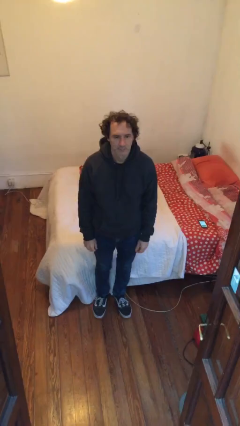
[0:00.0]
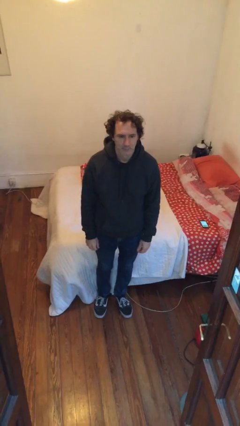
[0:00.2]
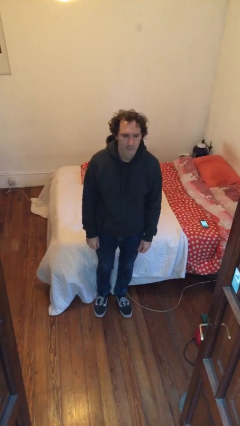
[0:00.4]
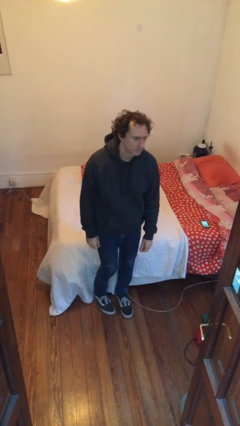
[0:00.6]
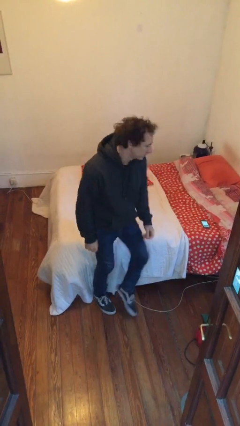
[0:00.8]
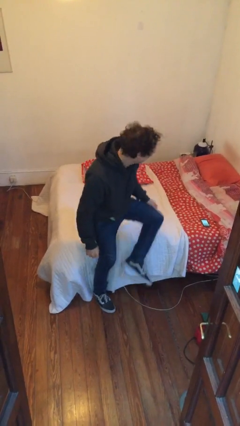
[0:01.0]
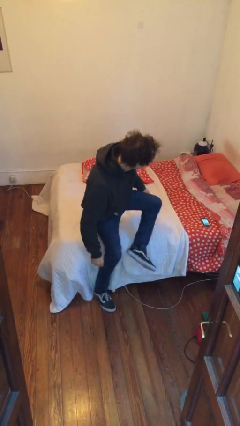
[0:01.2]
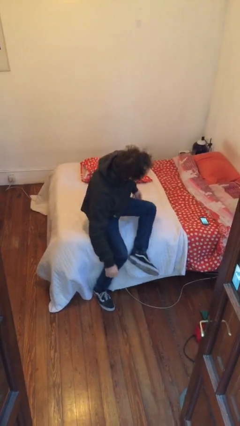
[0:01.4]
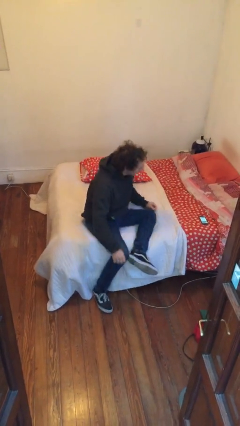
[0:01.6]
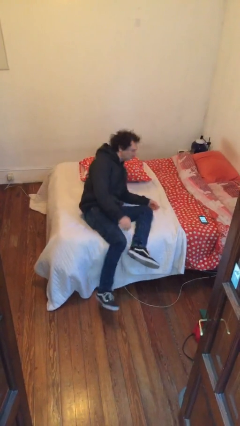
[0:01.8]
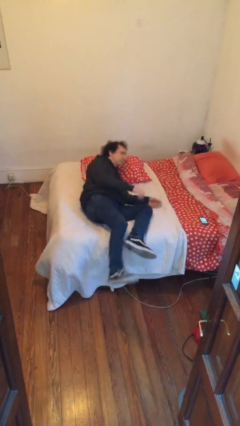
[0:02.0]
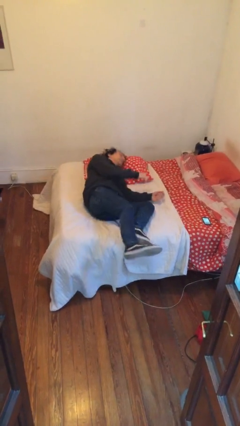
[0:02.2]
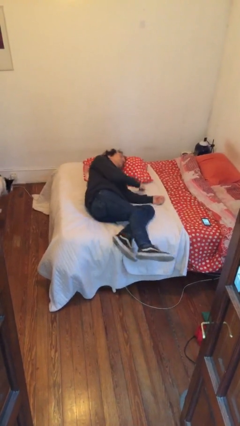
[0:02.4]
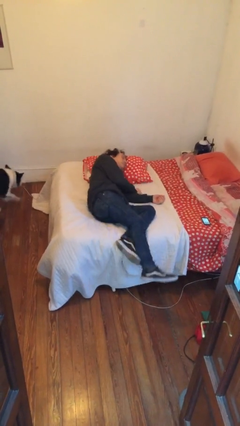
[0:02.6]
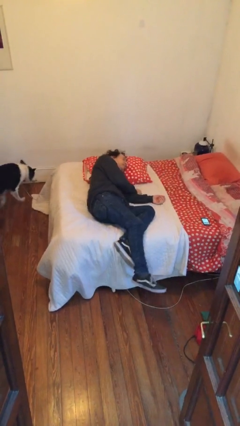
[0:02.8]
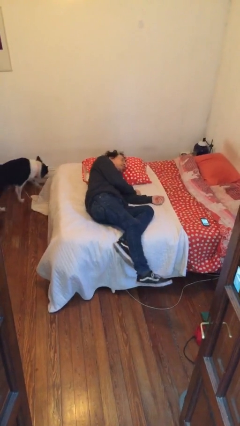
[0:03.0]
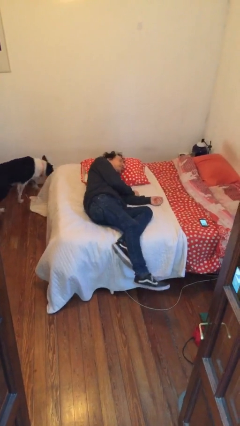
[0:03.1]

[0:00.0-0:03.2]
person lies down on bed

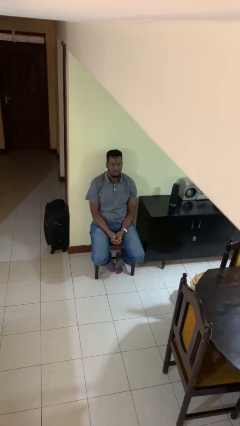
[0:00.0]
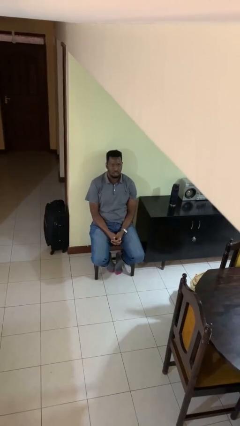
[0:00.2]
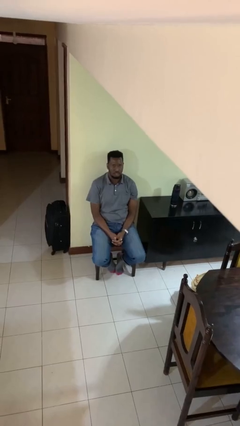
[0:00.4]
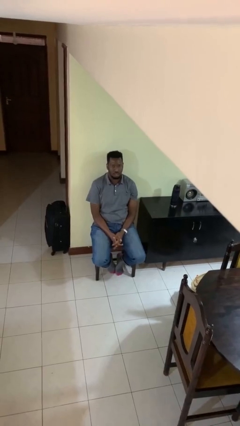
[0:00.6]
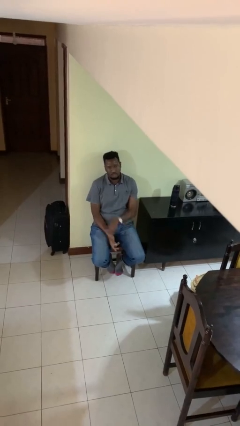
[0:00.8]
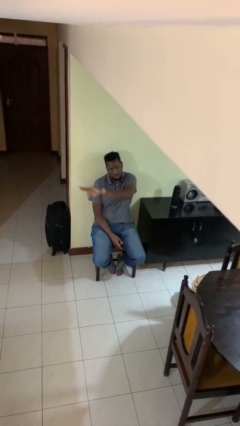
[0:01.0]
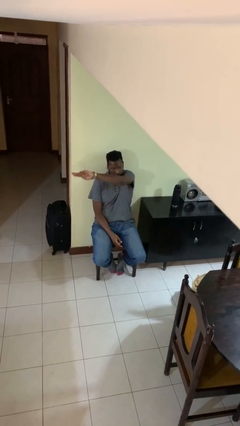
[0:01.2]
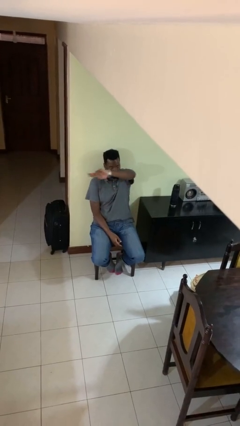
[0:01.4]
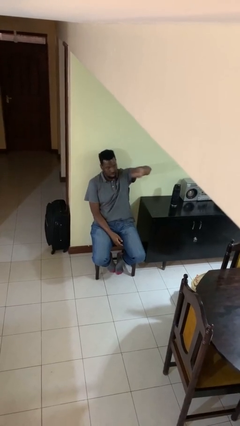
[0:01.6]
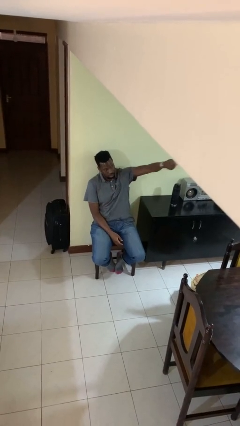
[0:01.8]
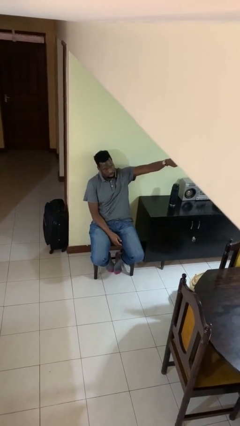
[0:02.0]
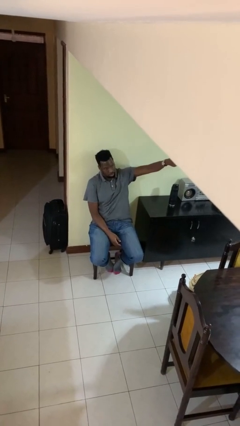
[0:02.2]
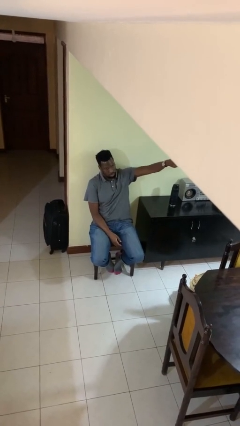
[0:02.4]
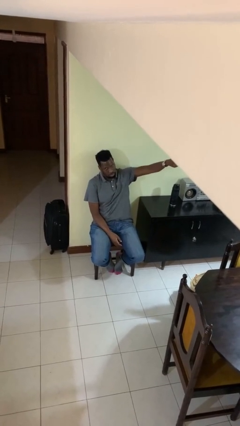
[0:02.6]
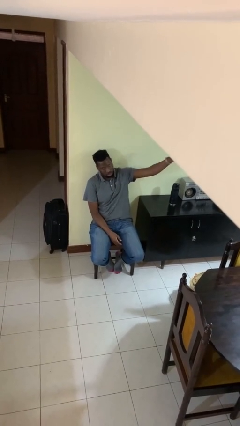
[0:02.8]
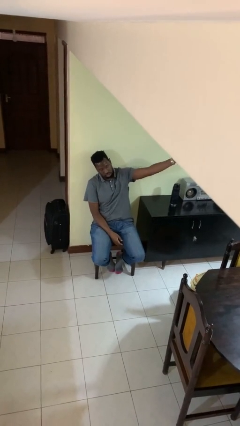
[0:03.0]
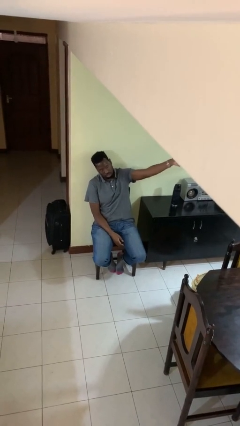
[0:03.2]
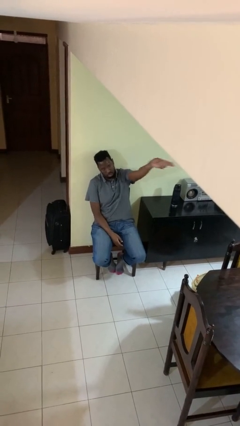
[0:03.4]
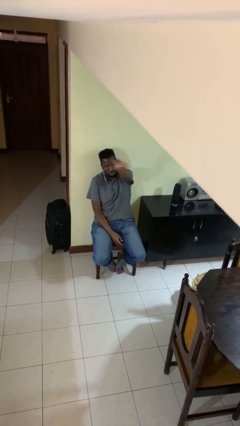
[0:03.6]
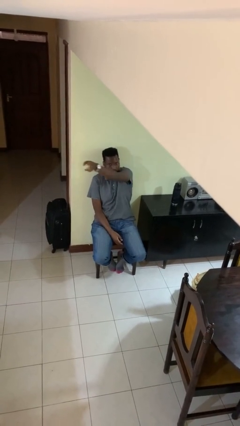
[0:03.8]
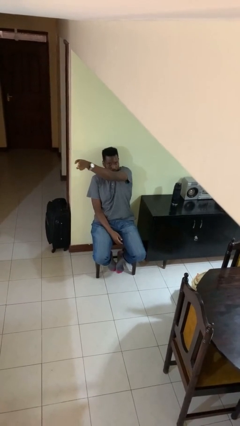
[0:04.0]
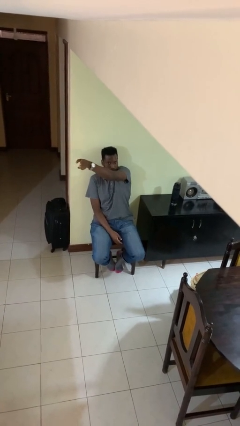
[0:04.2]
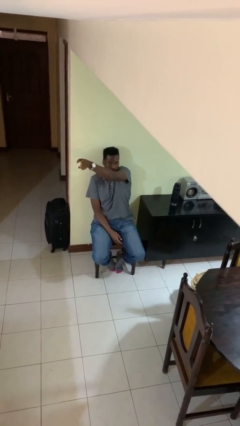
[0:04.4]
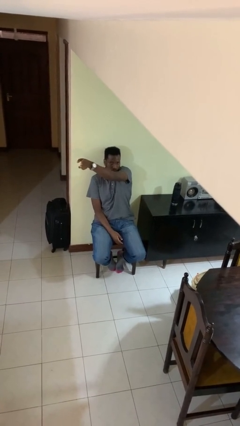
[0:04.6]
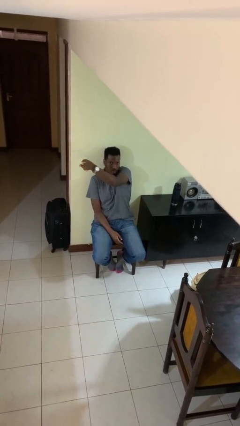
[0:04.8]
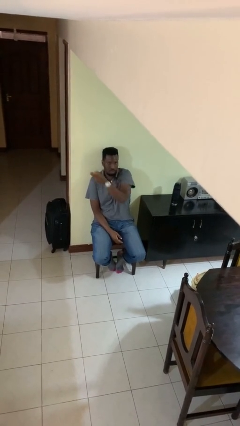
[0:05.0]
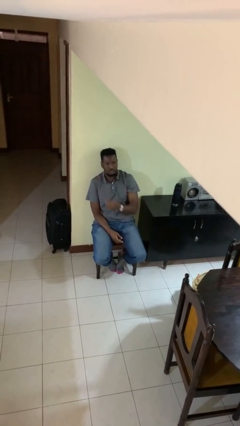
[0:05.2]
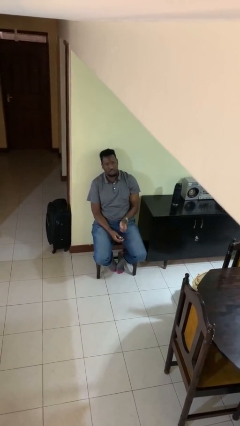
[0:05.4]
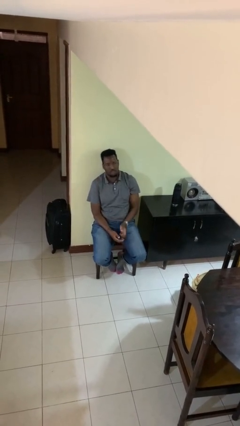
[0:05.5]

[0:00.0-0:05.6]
person gestures swipe left

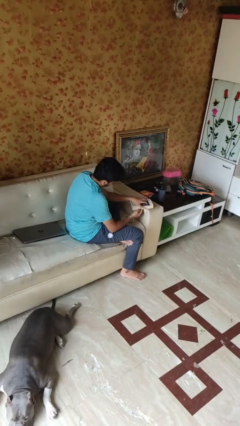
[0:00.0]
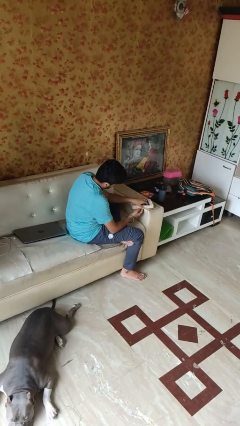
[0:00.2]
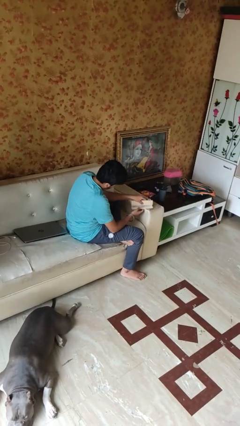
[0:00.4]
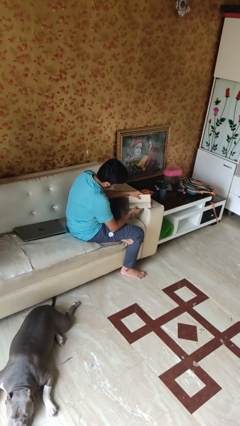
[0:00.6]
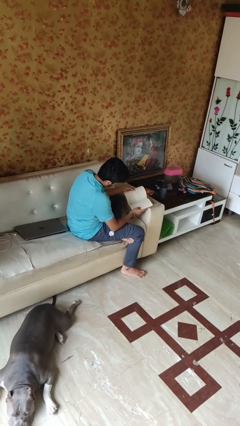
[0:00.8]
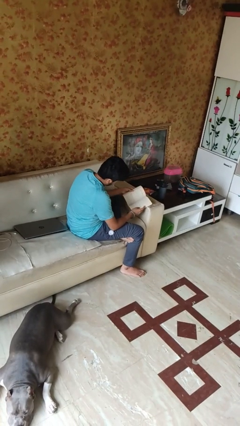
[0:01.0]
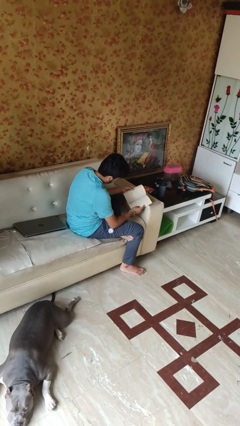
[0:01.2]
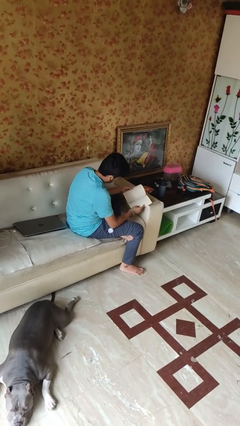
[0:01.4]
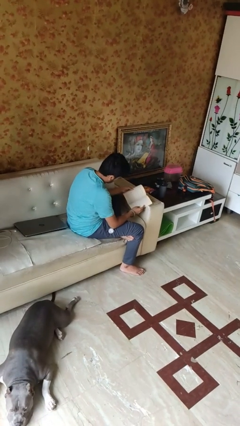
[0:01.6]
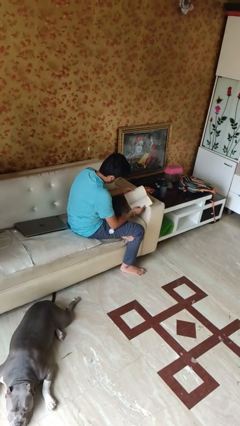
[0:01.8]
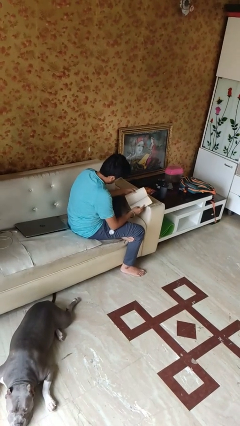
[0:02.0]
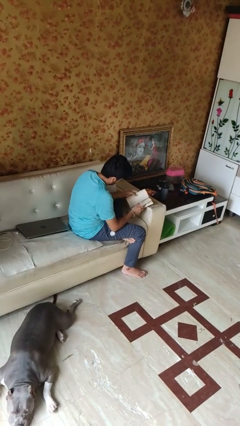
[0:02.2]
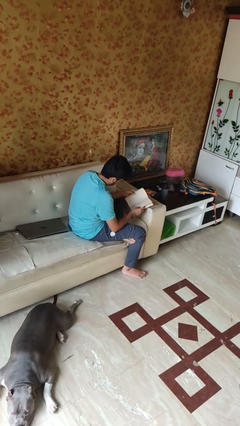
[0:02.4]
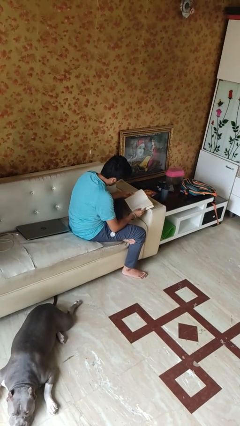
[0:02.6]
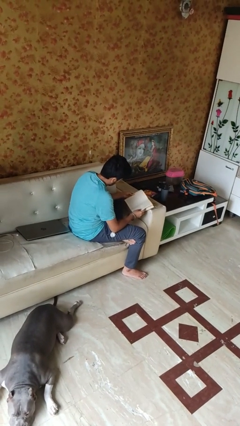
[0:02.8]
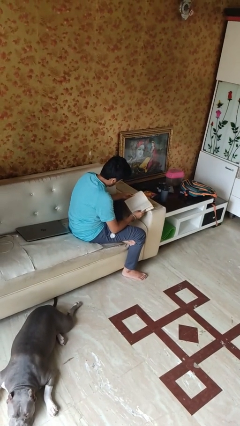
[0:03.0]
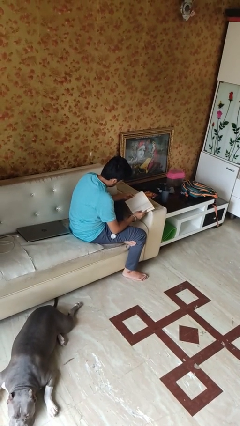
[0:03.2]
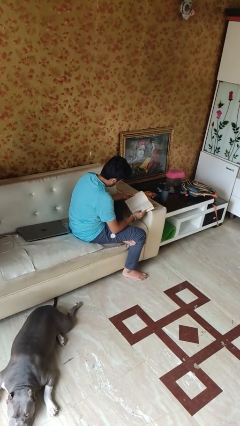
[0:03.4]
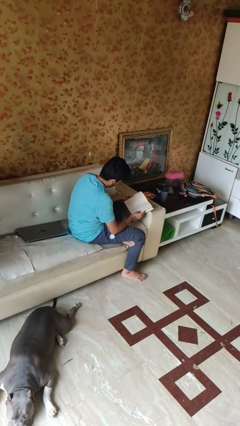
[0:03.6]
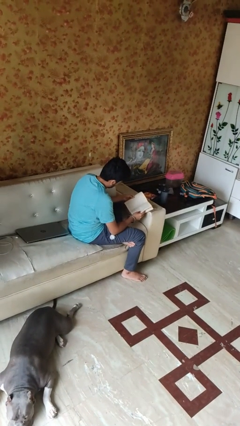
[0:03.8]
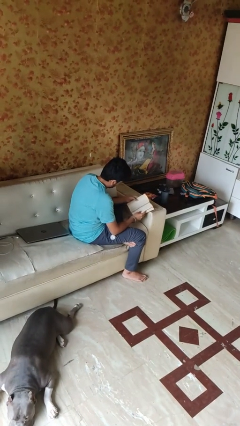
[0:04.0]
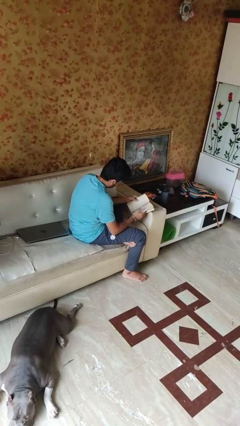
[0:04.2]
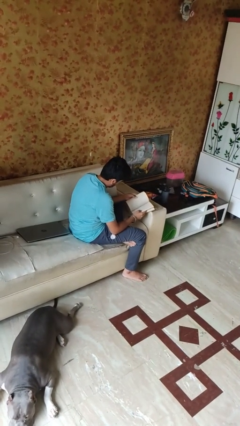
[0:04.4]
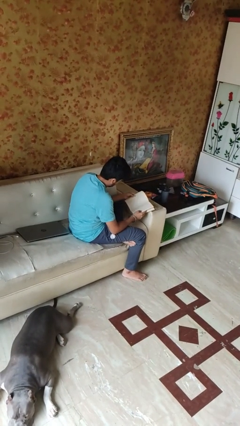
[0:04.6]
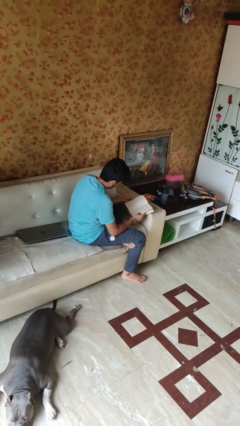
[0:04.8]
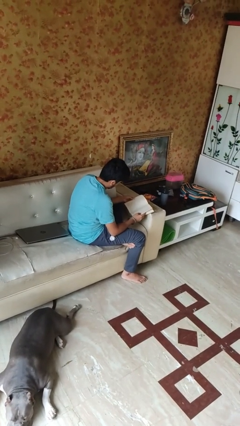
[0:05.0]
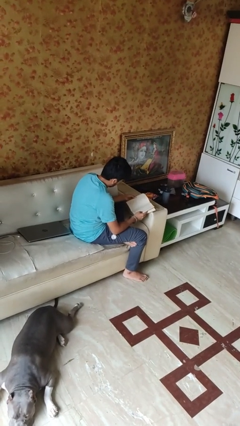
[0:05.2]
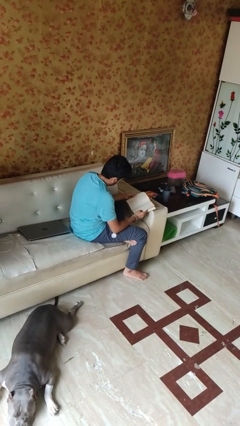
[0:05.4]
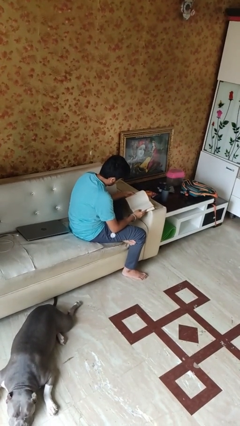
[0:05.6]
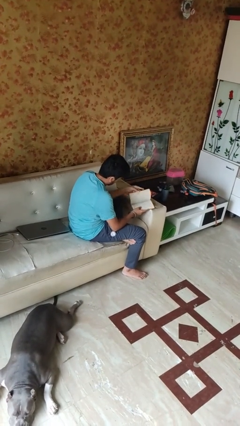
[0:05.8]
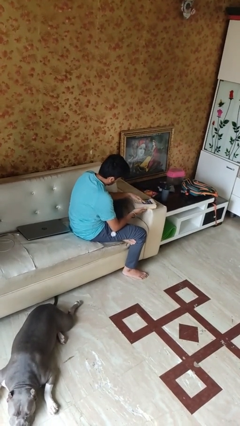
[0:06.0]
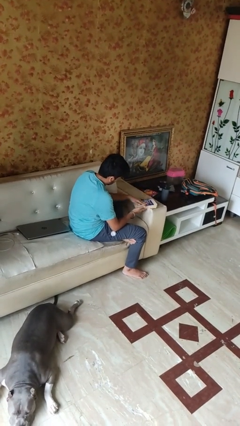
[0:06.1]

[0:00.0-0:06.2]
person reads book

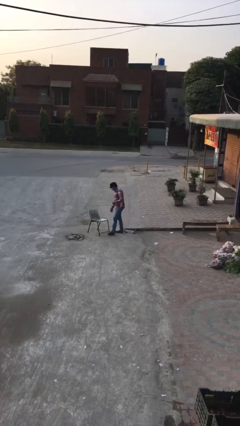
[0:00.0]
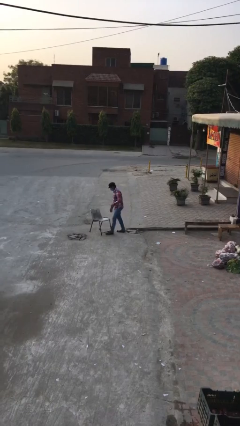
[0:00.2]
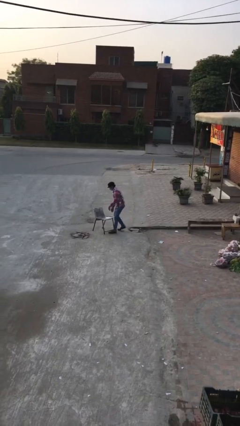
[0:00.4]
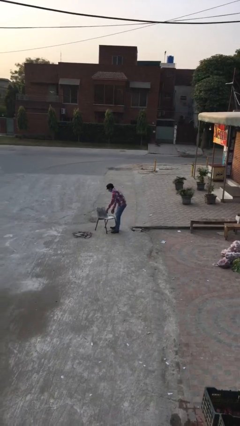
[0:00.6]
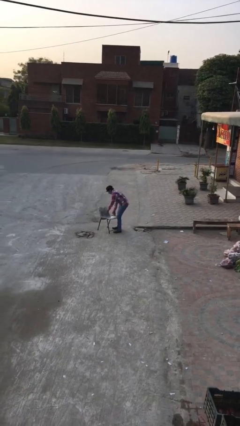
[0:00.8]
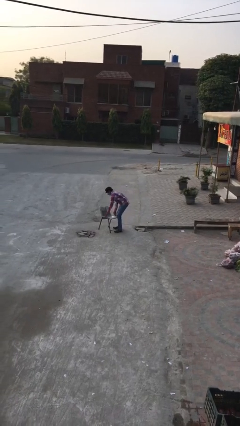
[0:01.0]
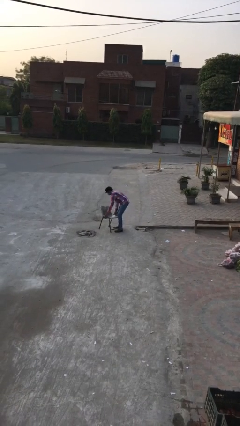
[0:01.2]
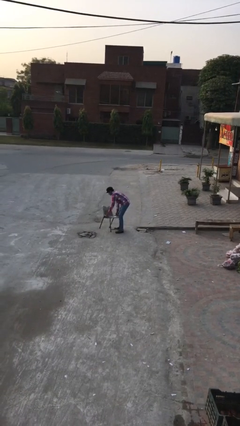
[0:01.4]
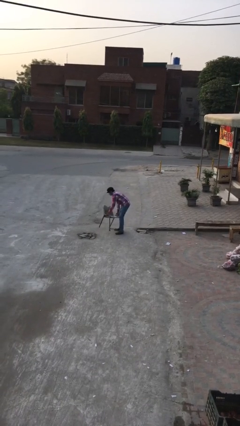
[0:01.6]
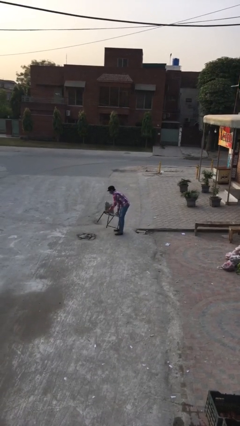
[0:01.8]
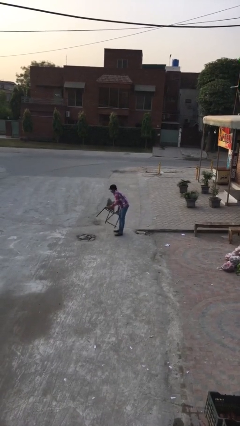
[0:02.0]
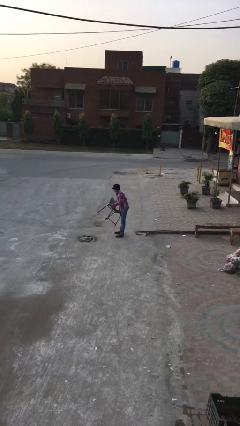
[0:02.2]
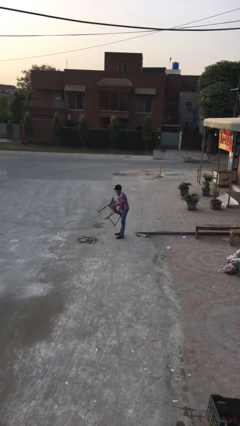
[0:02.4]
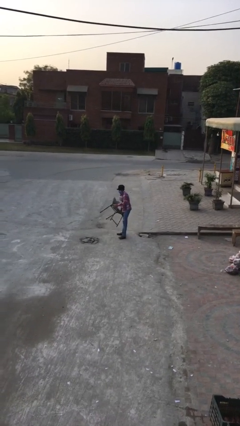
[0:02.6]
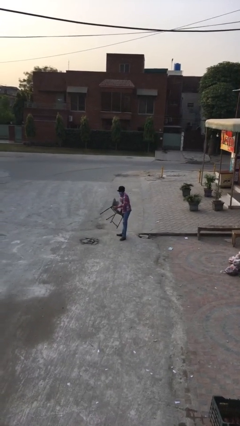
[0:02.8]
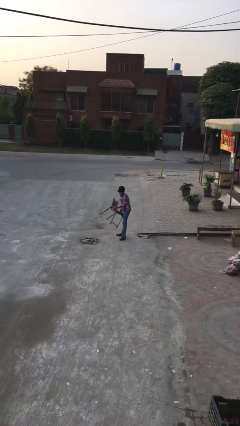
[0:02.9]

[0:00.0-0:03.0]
person picks up object from floor
